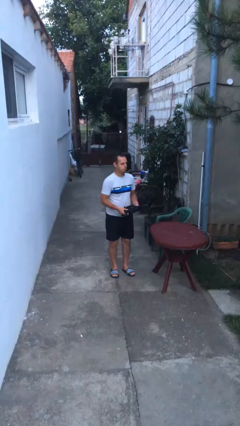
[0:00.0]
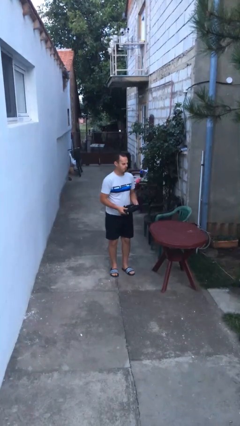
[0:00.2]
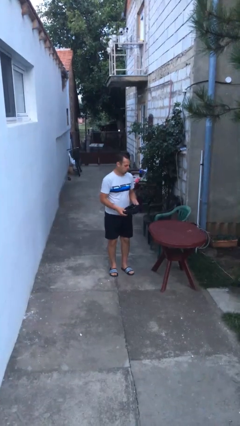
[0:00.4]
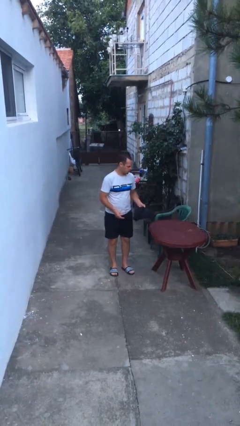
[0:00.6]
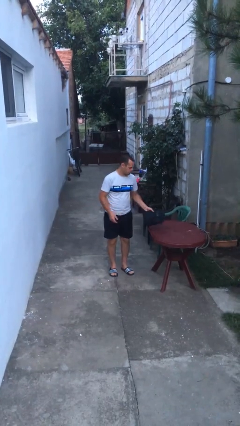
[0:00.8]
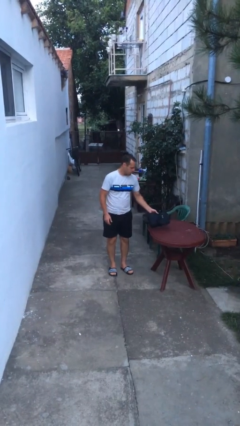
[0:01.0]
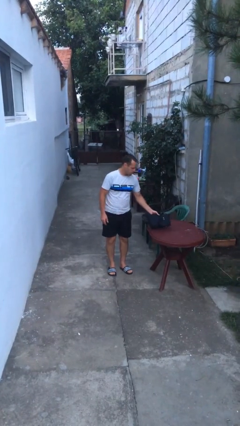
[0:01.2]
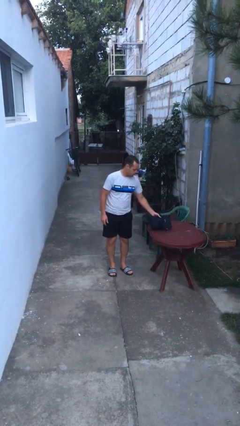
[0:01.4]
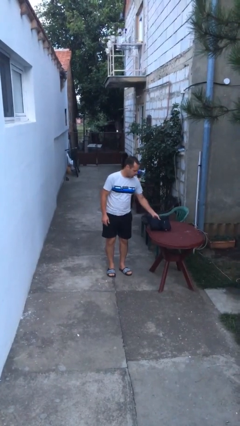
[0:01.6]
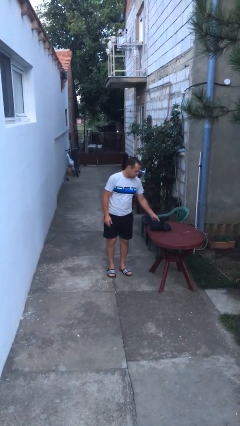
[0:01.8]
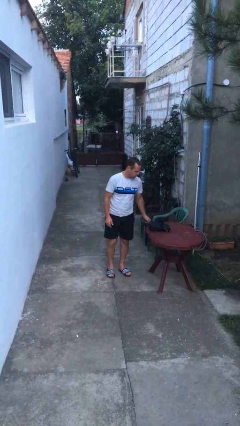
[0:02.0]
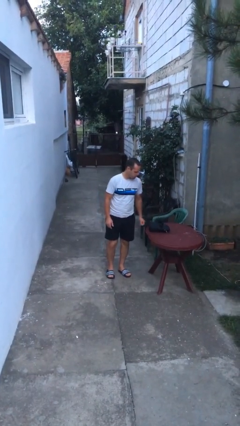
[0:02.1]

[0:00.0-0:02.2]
person puts down object on table

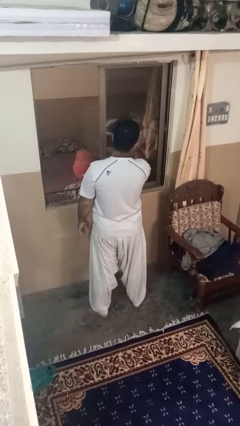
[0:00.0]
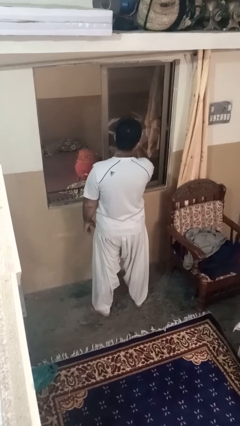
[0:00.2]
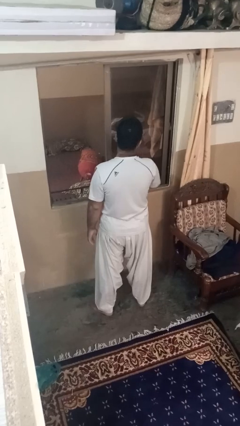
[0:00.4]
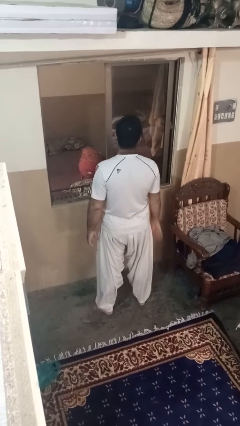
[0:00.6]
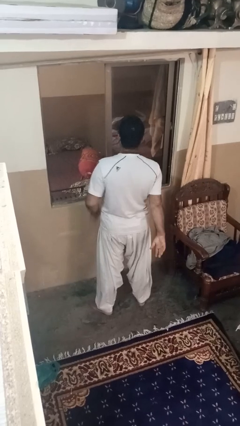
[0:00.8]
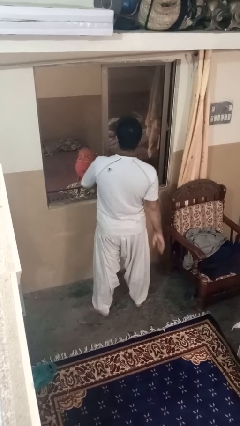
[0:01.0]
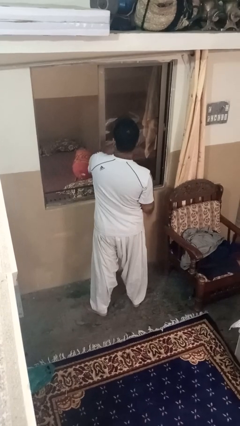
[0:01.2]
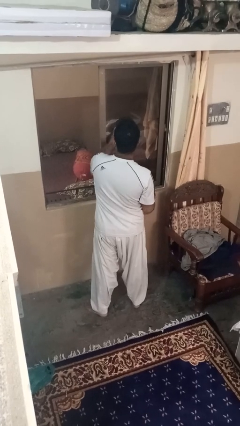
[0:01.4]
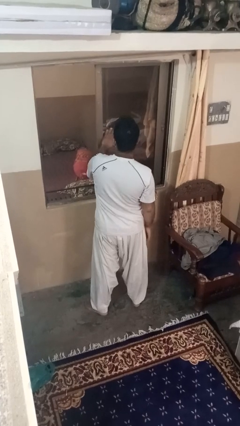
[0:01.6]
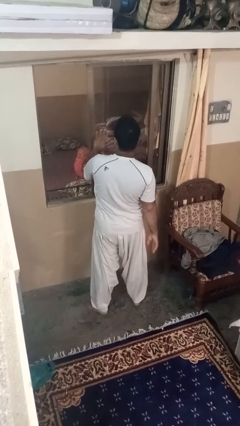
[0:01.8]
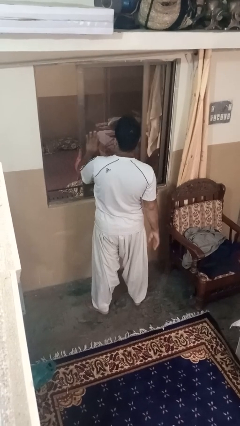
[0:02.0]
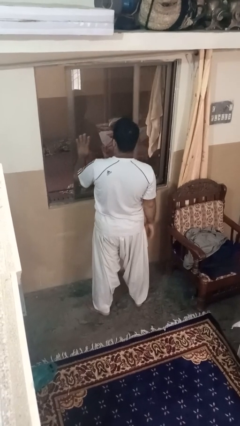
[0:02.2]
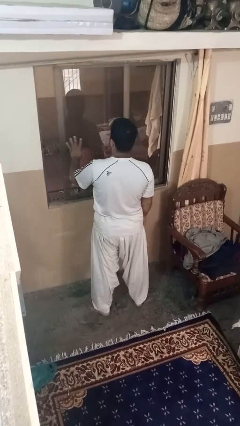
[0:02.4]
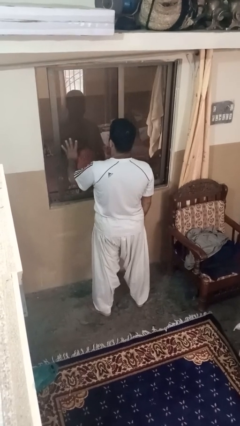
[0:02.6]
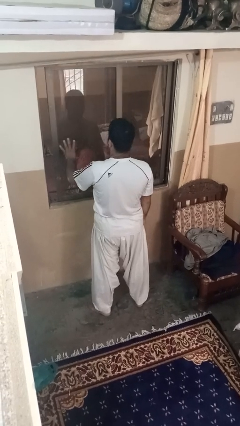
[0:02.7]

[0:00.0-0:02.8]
person closes home window

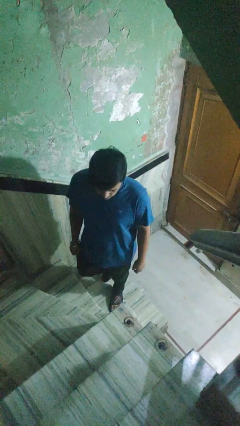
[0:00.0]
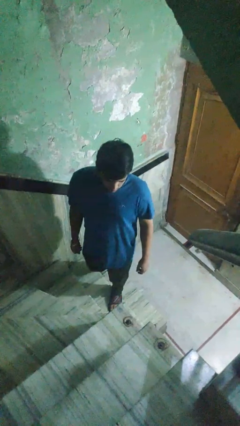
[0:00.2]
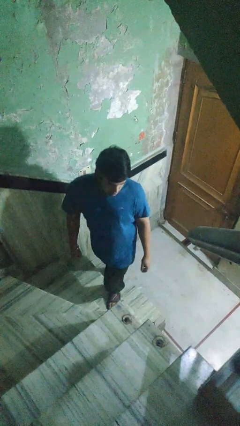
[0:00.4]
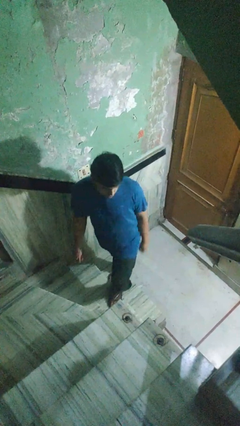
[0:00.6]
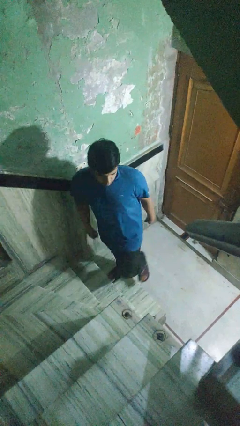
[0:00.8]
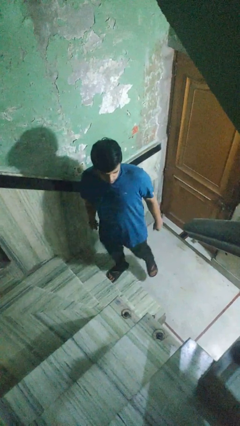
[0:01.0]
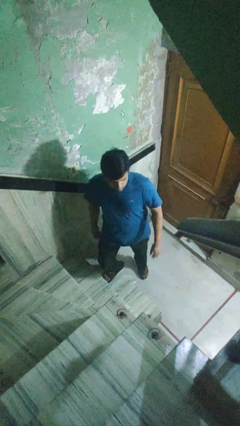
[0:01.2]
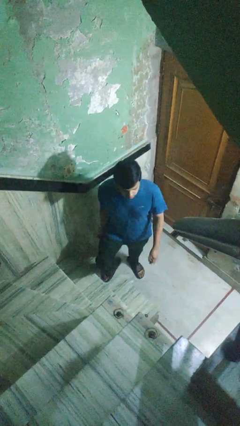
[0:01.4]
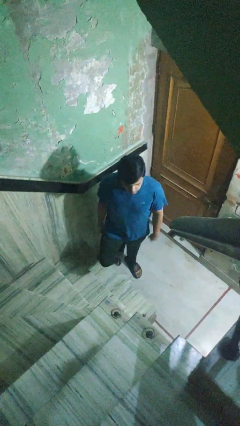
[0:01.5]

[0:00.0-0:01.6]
person climbs down stairs

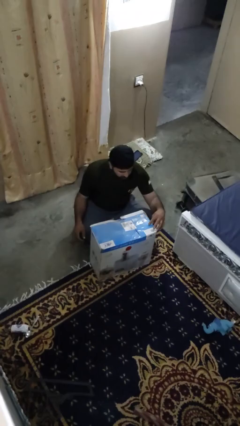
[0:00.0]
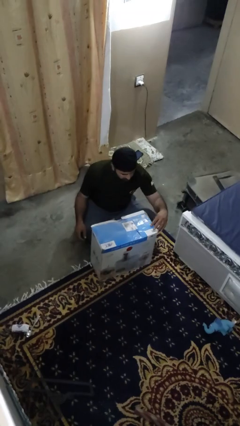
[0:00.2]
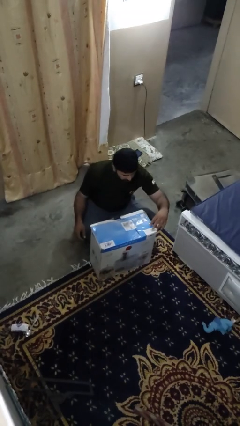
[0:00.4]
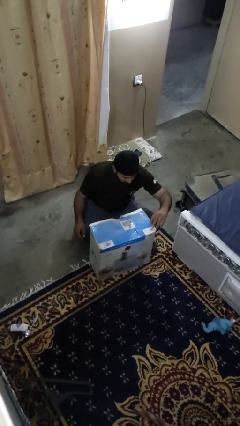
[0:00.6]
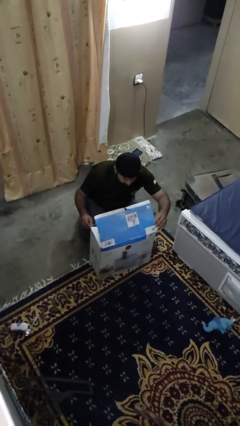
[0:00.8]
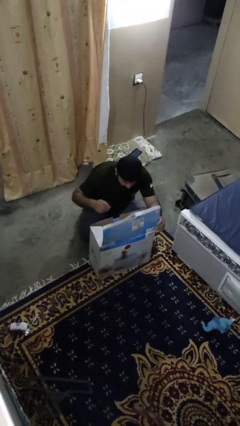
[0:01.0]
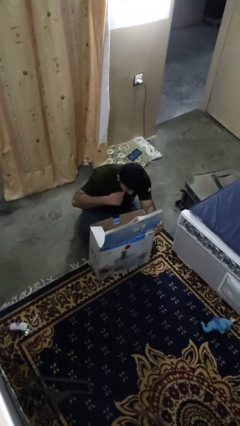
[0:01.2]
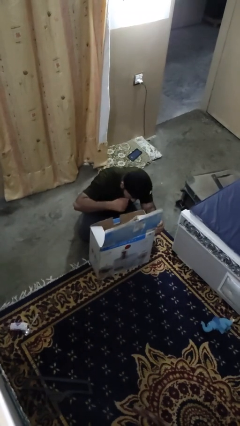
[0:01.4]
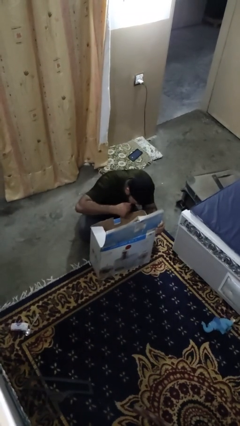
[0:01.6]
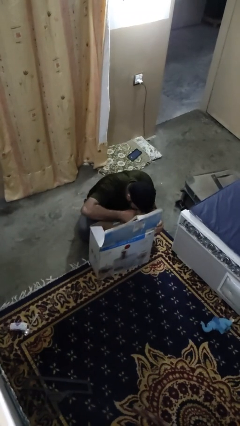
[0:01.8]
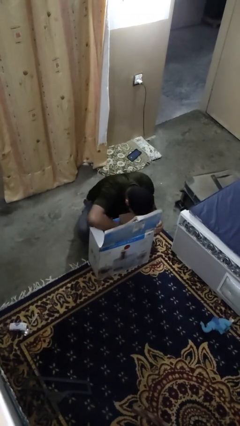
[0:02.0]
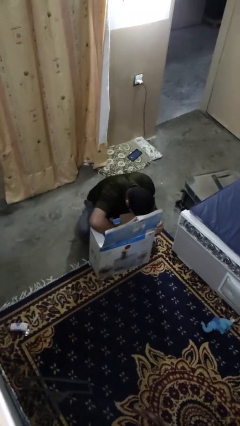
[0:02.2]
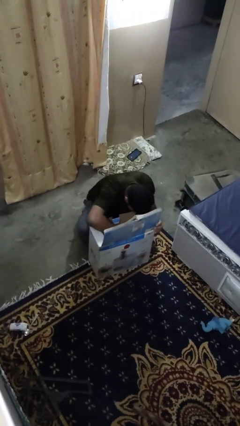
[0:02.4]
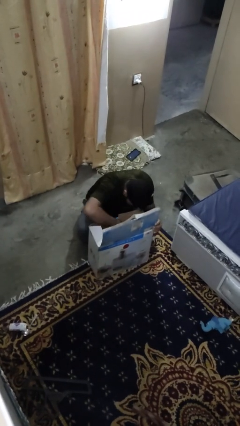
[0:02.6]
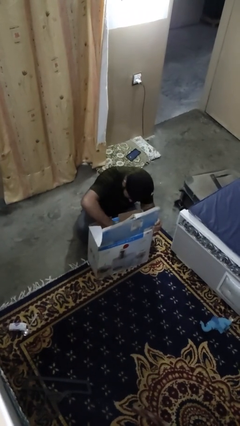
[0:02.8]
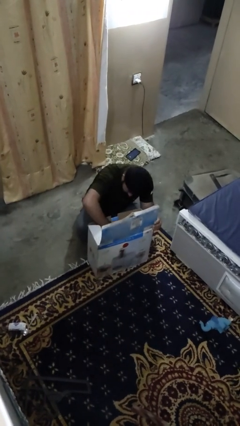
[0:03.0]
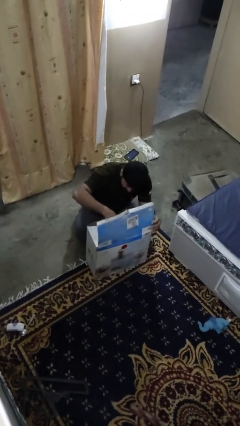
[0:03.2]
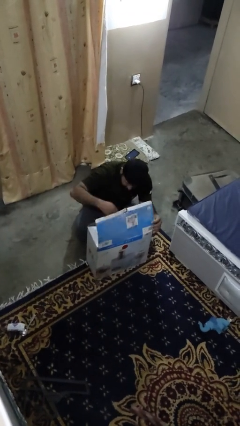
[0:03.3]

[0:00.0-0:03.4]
person searches in box

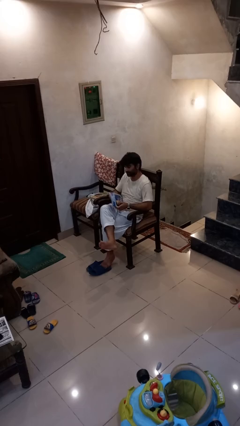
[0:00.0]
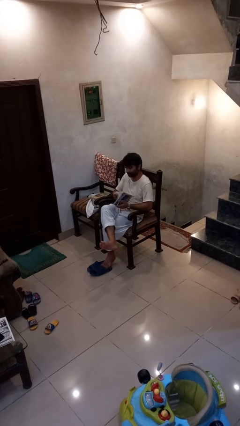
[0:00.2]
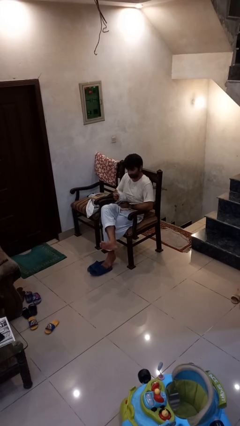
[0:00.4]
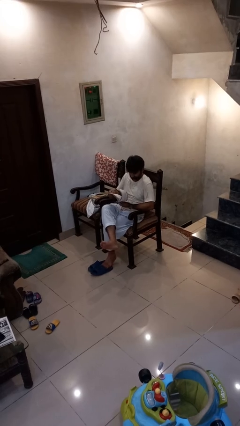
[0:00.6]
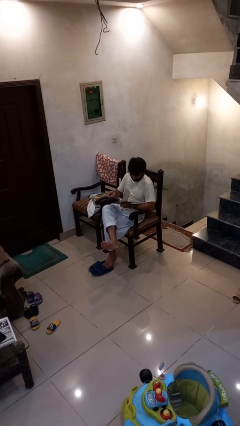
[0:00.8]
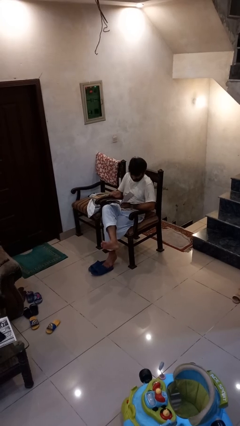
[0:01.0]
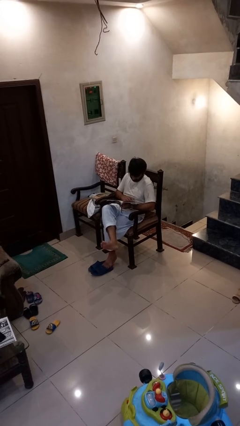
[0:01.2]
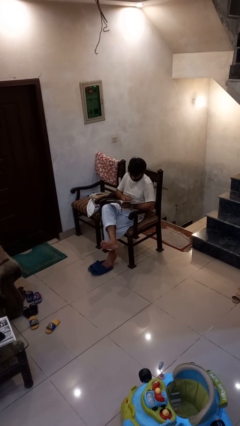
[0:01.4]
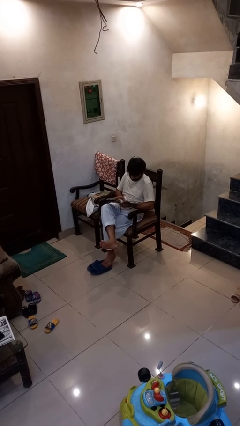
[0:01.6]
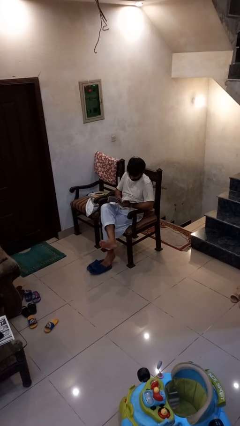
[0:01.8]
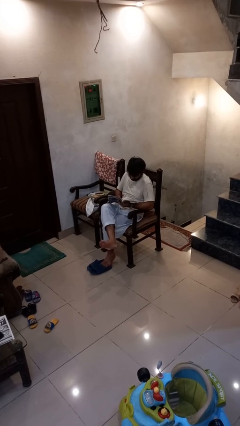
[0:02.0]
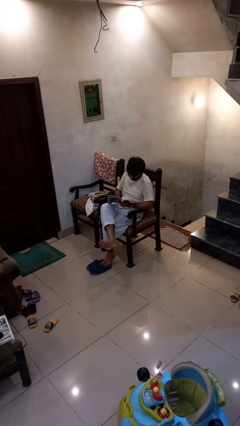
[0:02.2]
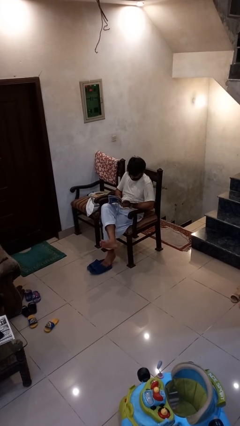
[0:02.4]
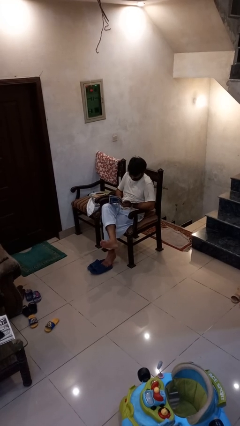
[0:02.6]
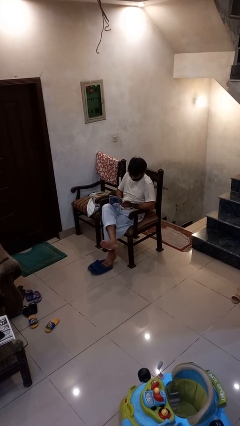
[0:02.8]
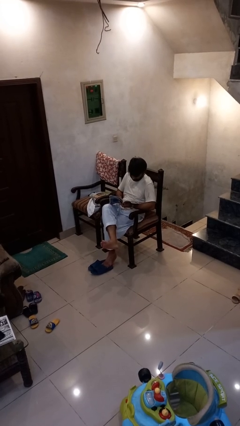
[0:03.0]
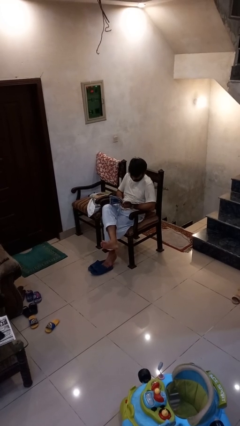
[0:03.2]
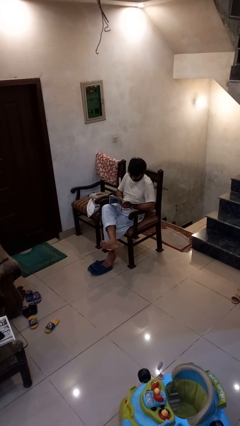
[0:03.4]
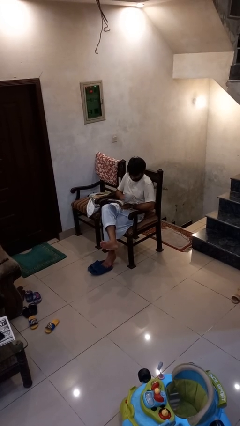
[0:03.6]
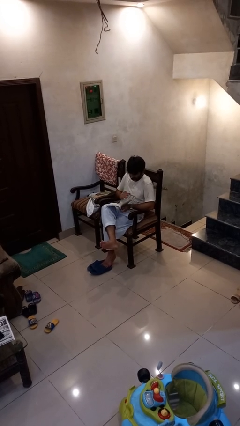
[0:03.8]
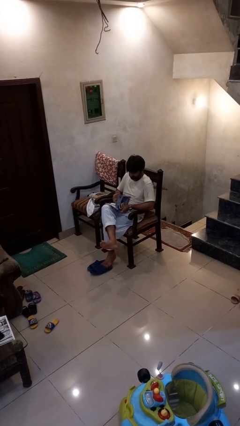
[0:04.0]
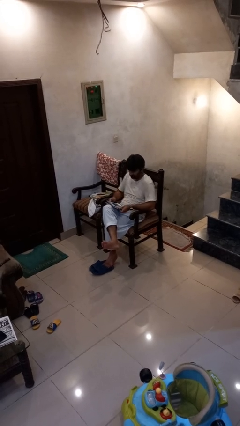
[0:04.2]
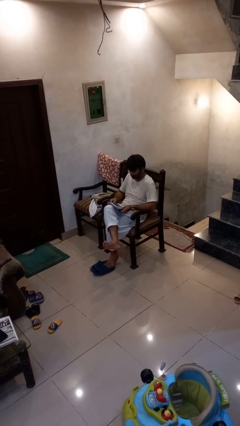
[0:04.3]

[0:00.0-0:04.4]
person reads book

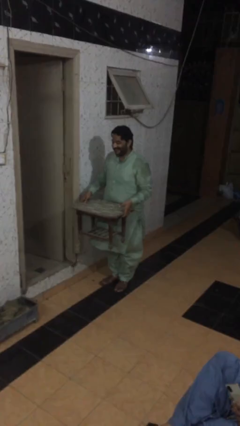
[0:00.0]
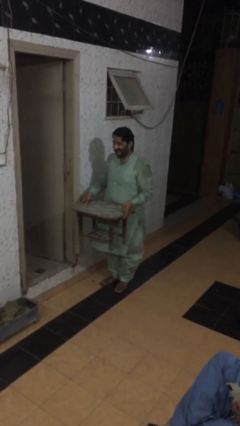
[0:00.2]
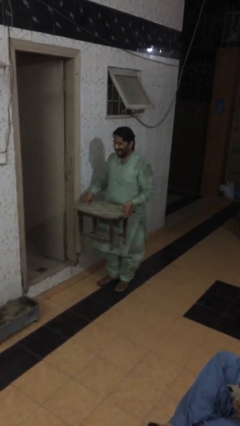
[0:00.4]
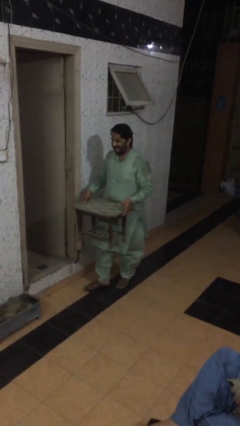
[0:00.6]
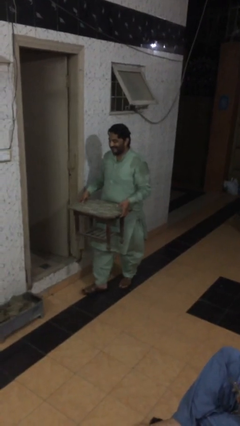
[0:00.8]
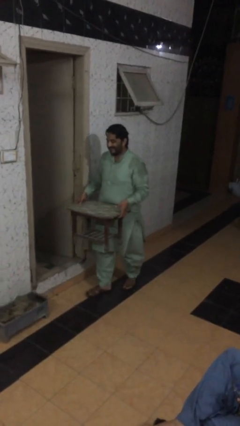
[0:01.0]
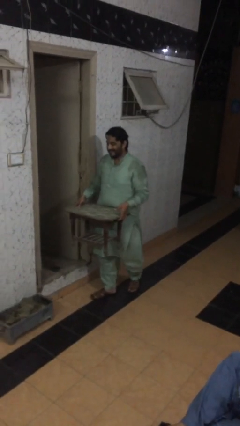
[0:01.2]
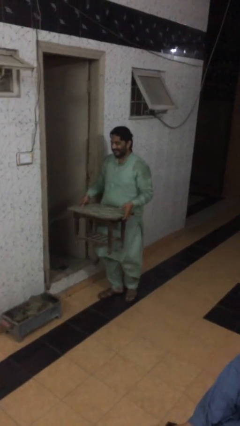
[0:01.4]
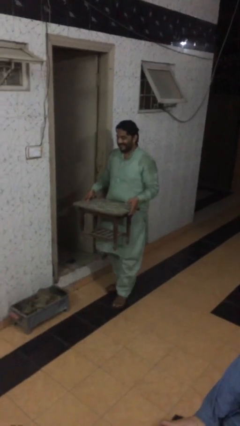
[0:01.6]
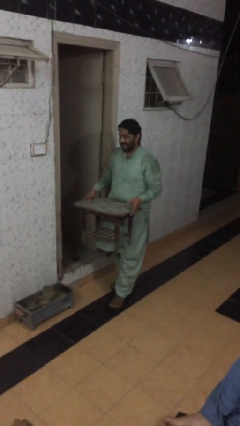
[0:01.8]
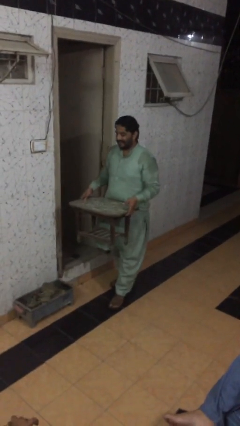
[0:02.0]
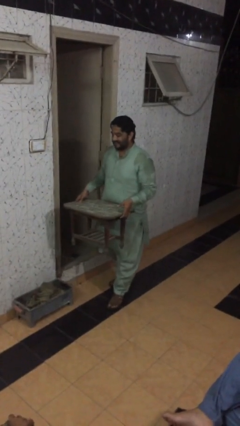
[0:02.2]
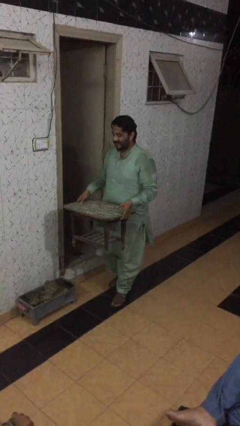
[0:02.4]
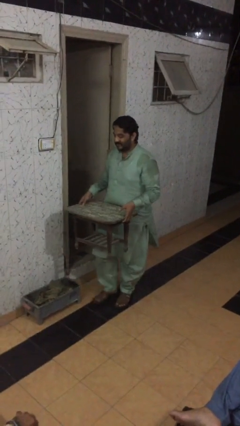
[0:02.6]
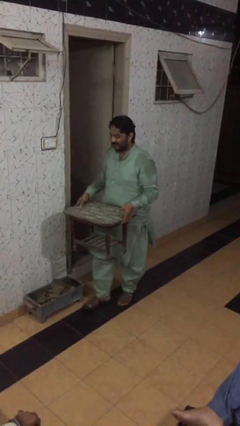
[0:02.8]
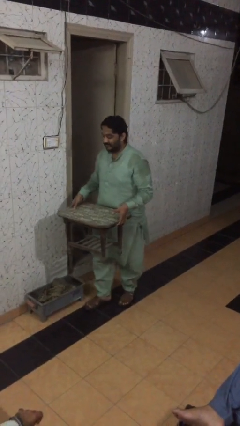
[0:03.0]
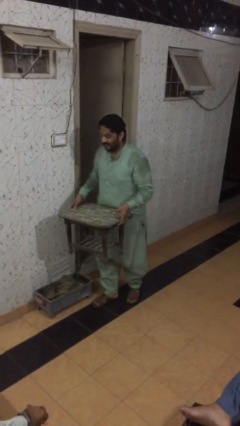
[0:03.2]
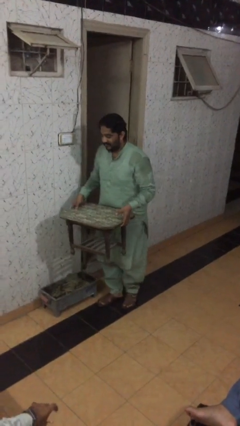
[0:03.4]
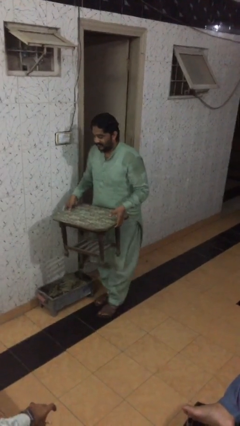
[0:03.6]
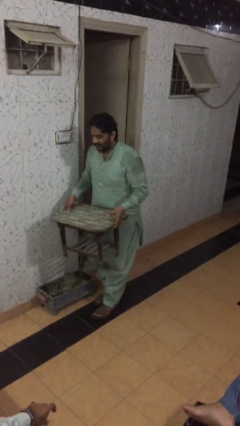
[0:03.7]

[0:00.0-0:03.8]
person carries heavy object
